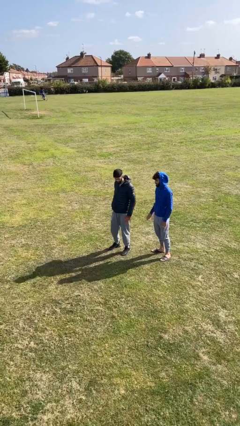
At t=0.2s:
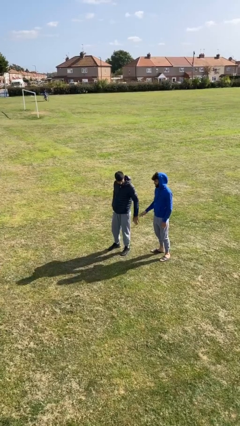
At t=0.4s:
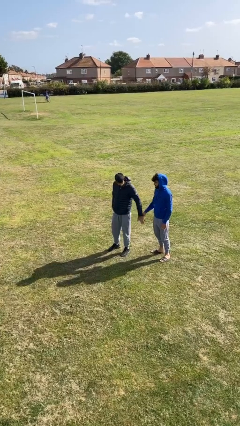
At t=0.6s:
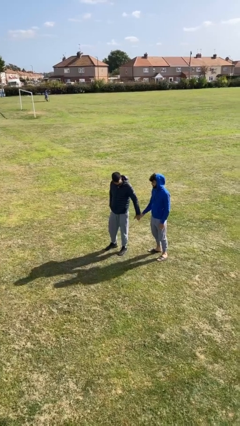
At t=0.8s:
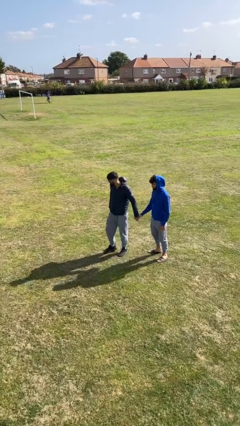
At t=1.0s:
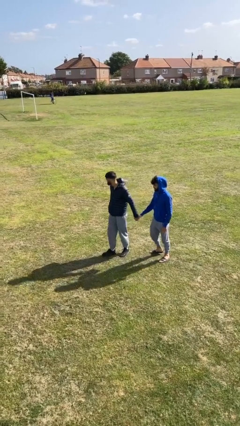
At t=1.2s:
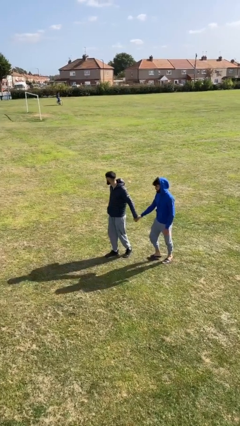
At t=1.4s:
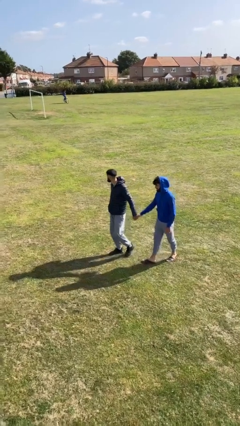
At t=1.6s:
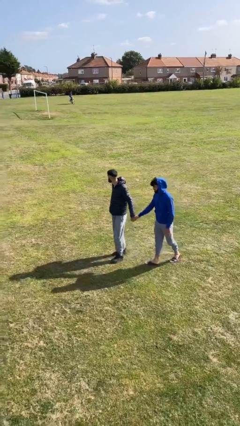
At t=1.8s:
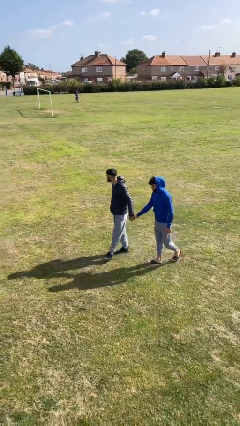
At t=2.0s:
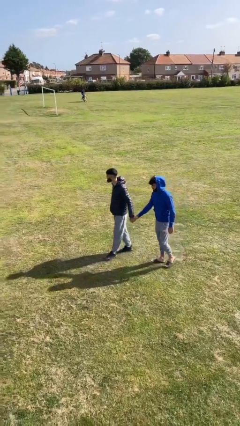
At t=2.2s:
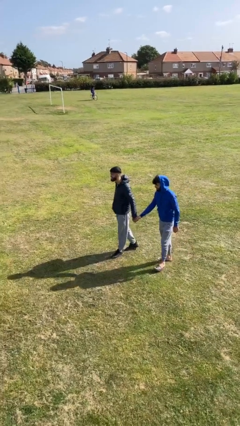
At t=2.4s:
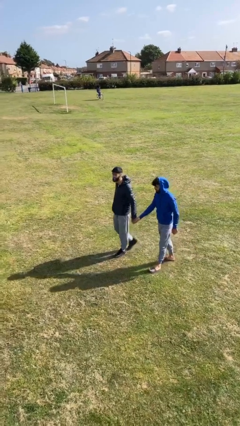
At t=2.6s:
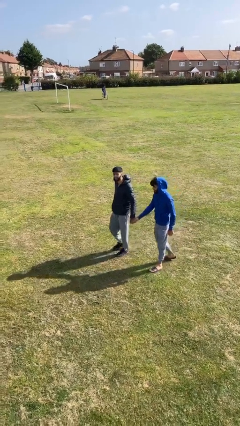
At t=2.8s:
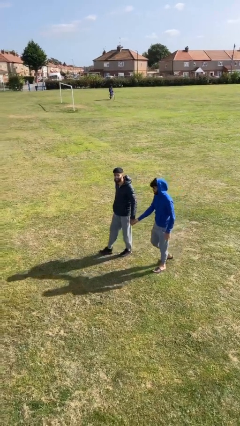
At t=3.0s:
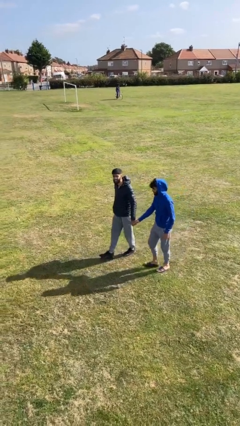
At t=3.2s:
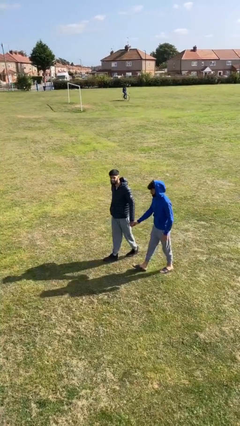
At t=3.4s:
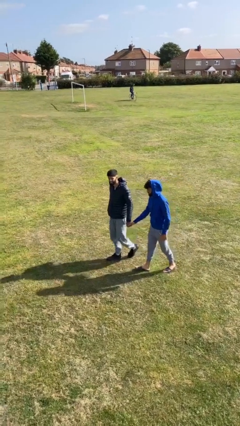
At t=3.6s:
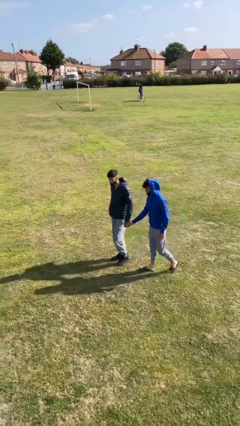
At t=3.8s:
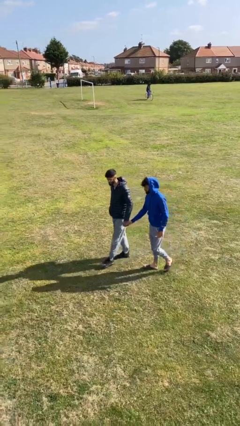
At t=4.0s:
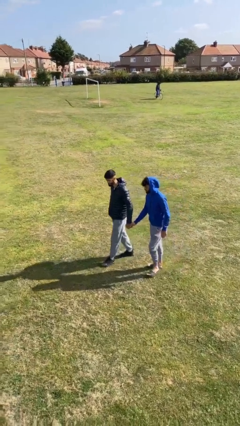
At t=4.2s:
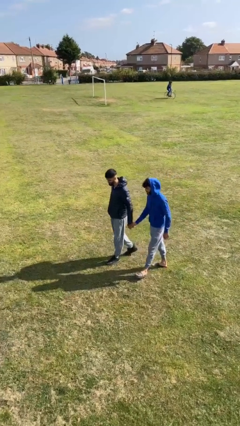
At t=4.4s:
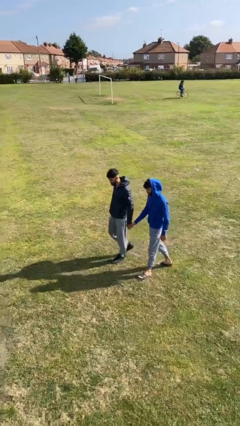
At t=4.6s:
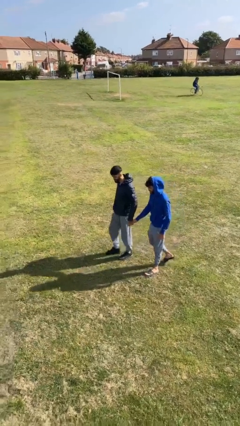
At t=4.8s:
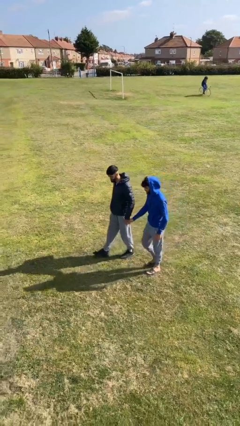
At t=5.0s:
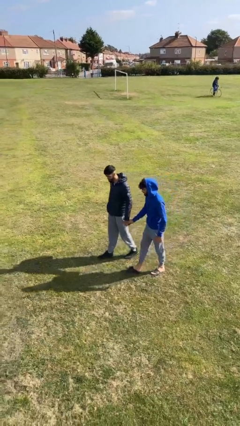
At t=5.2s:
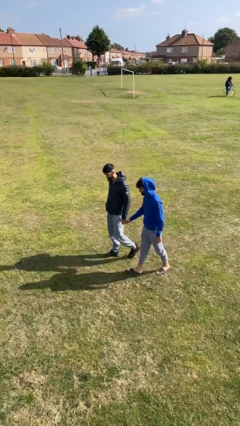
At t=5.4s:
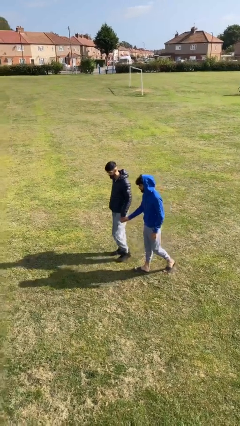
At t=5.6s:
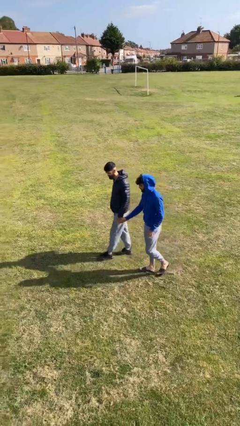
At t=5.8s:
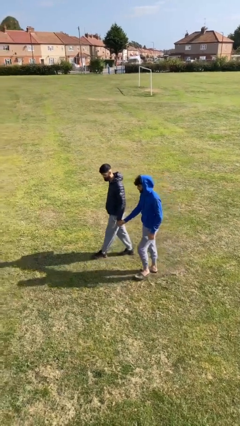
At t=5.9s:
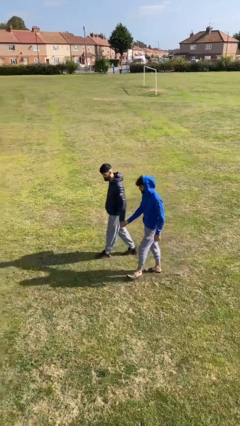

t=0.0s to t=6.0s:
person holds hand

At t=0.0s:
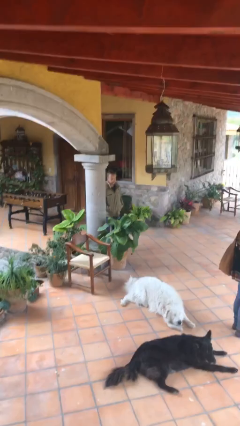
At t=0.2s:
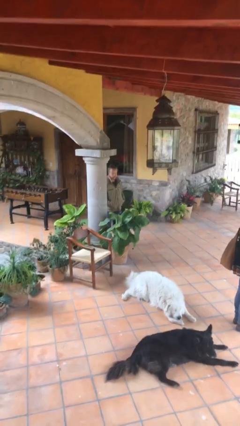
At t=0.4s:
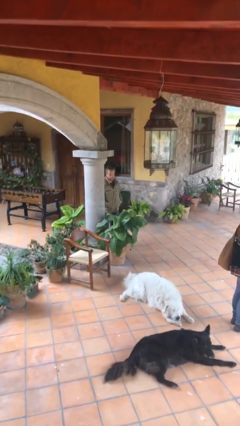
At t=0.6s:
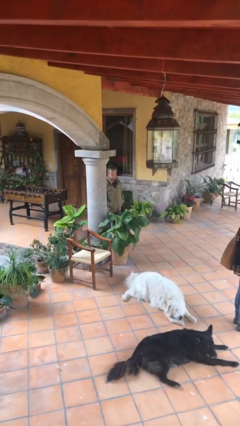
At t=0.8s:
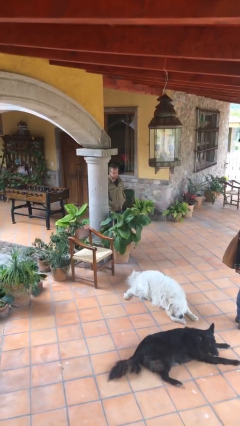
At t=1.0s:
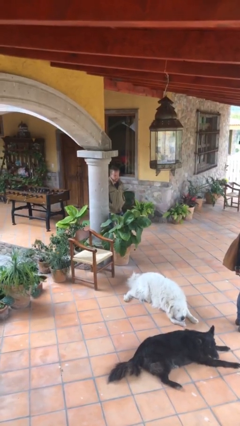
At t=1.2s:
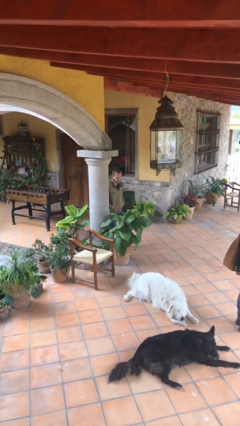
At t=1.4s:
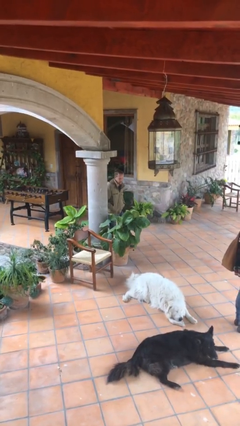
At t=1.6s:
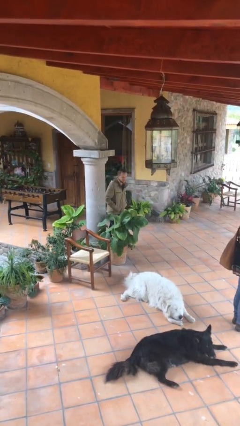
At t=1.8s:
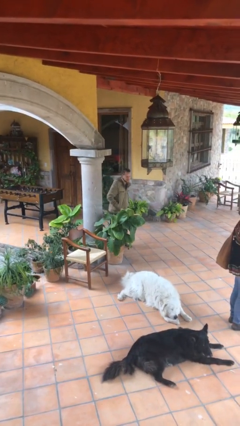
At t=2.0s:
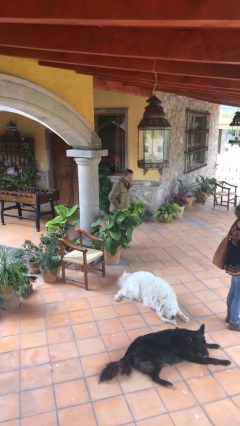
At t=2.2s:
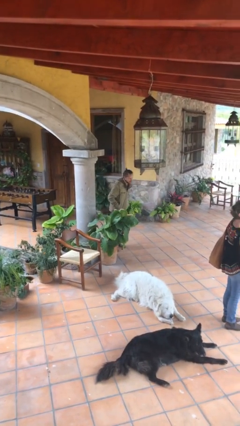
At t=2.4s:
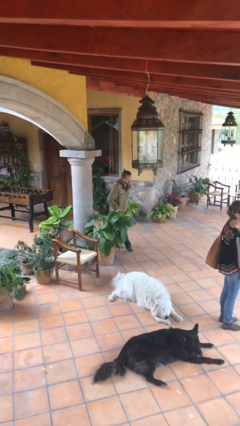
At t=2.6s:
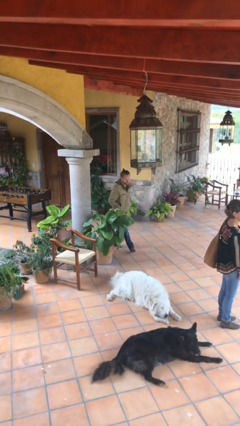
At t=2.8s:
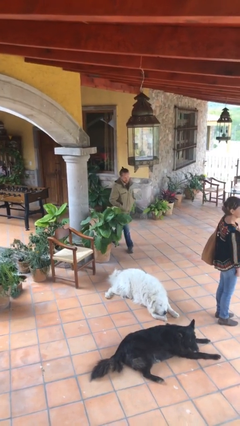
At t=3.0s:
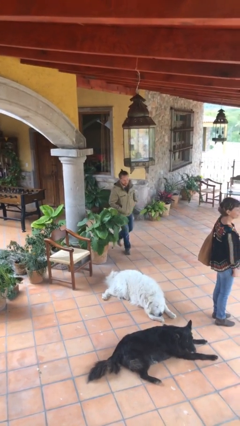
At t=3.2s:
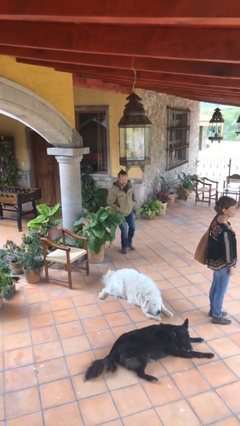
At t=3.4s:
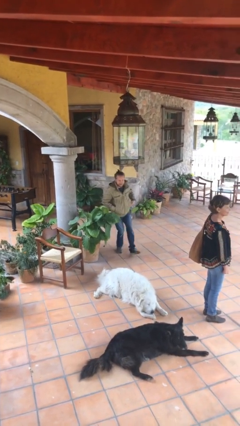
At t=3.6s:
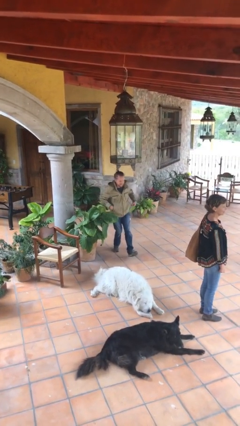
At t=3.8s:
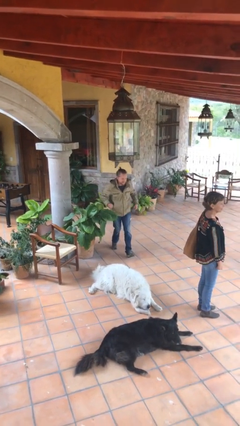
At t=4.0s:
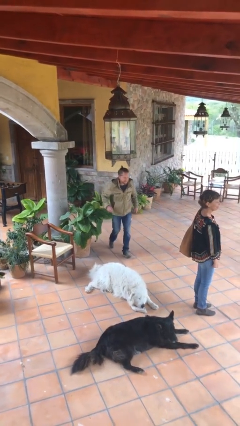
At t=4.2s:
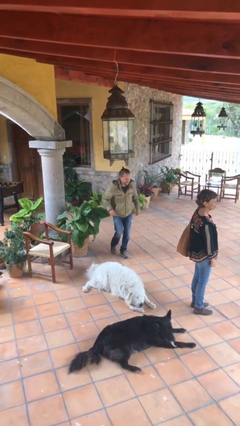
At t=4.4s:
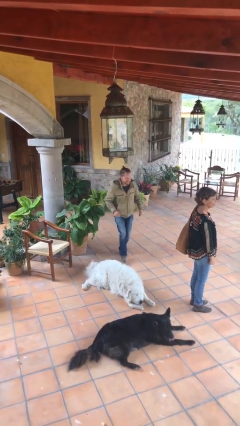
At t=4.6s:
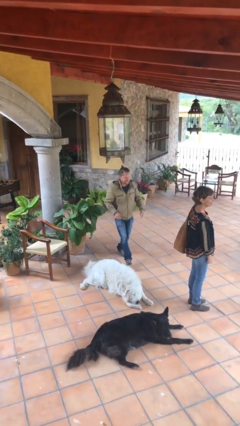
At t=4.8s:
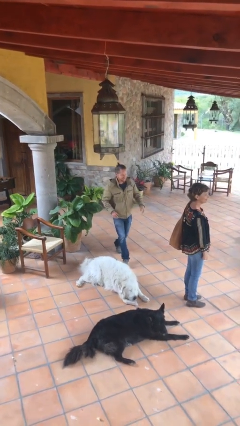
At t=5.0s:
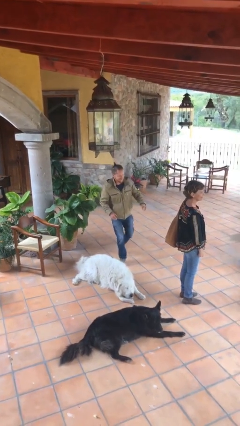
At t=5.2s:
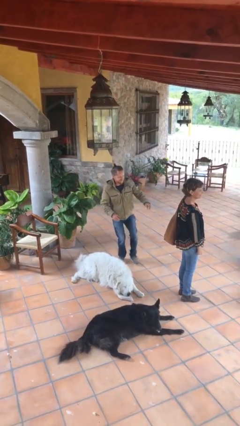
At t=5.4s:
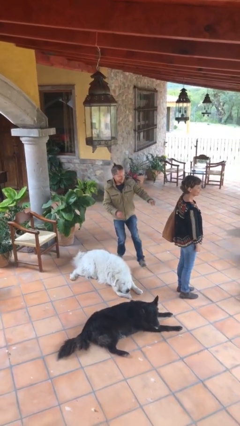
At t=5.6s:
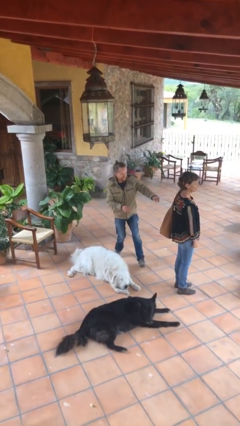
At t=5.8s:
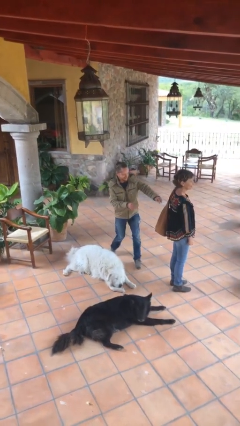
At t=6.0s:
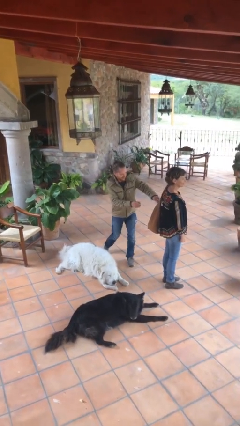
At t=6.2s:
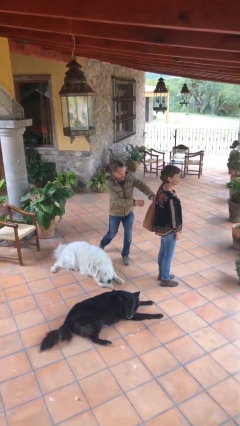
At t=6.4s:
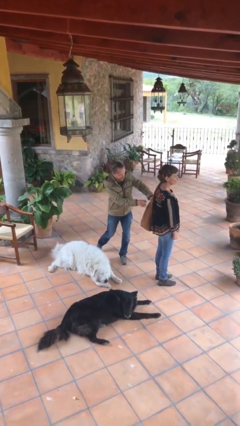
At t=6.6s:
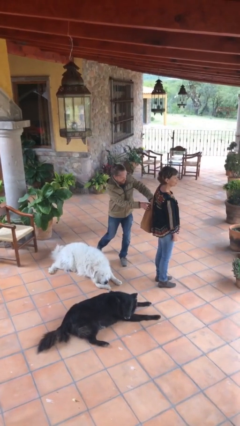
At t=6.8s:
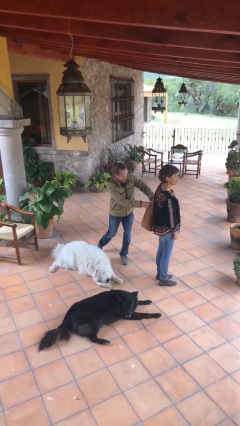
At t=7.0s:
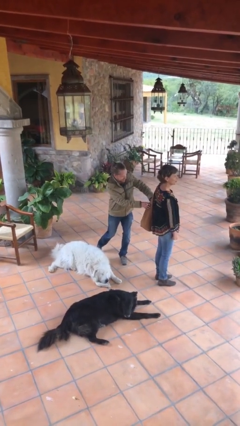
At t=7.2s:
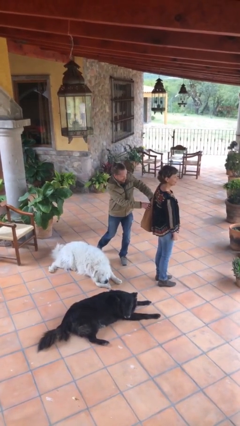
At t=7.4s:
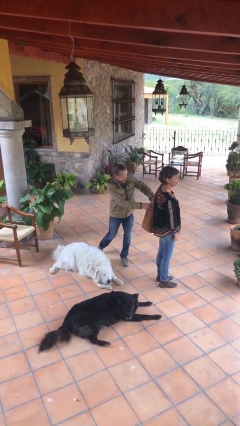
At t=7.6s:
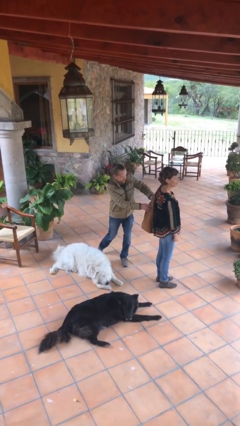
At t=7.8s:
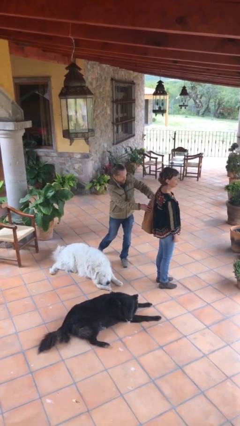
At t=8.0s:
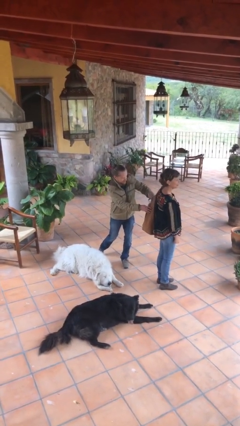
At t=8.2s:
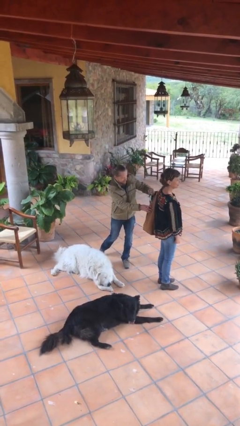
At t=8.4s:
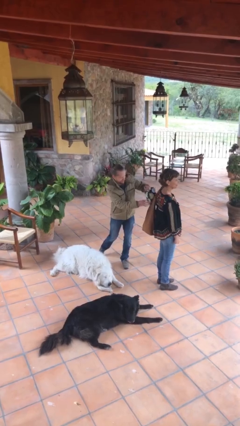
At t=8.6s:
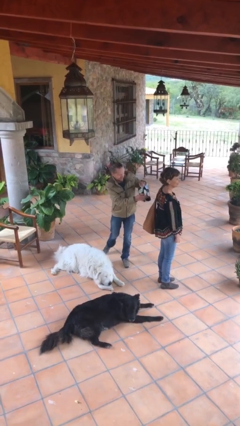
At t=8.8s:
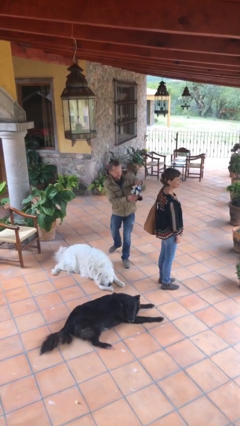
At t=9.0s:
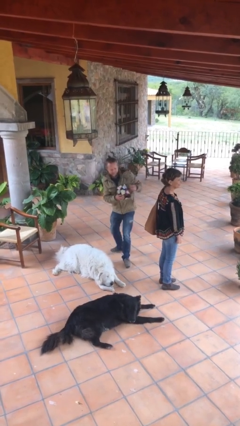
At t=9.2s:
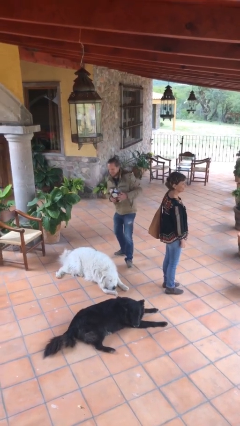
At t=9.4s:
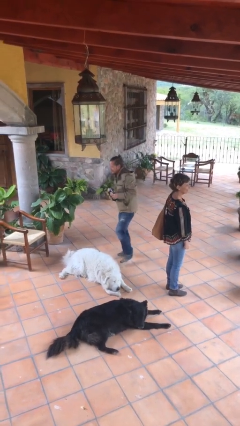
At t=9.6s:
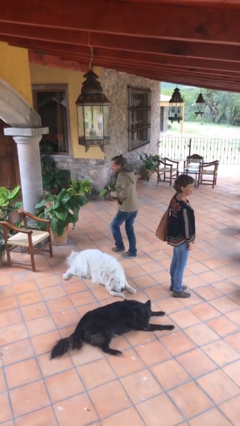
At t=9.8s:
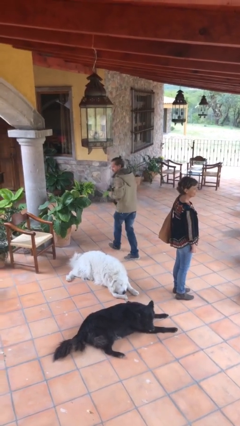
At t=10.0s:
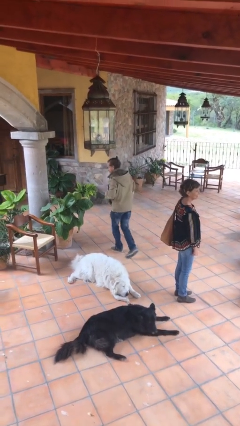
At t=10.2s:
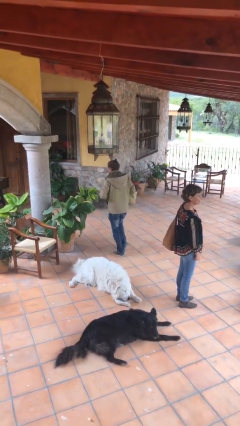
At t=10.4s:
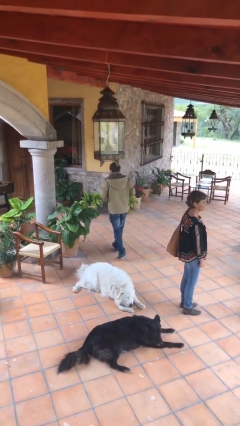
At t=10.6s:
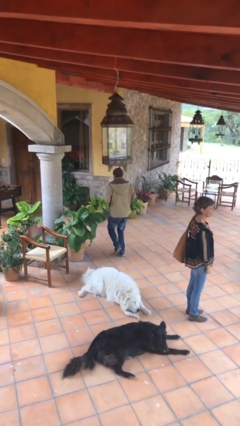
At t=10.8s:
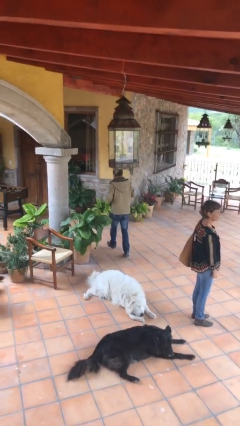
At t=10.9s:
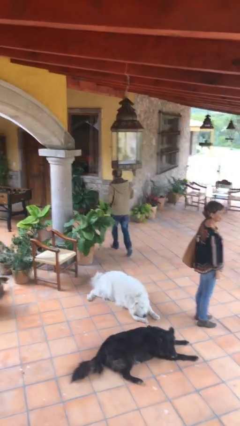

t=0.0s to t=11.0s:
person steals object from person

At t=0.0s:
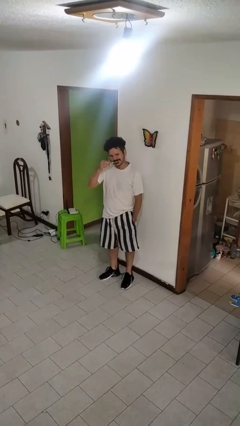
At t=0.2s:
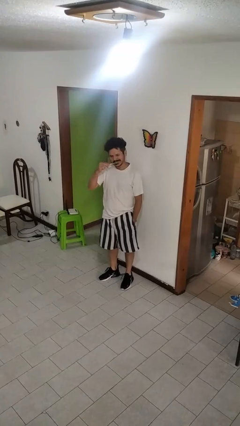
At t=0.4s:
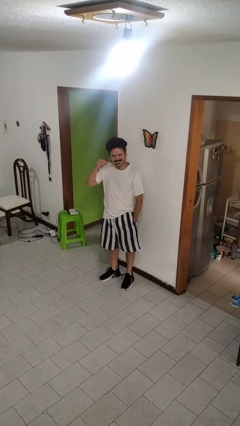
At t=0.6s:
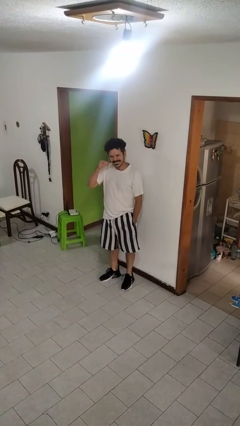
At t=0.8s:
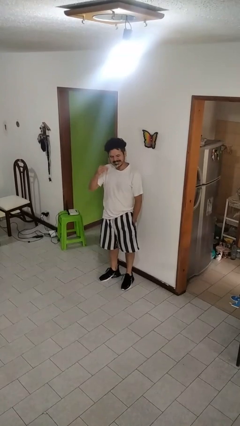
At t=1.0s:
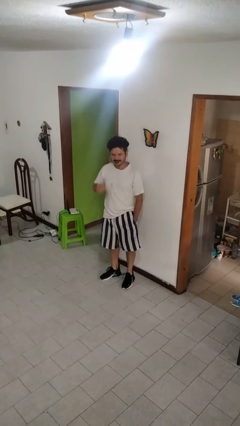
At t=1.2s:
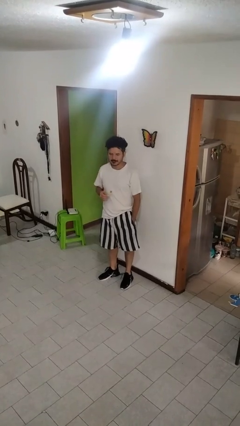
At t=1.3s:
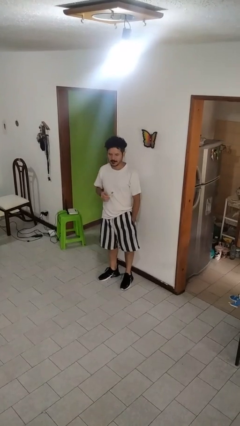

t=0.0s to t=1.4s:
person brushes teeth
